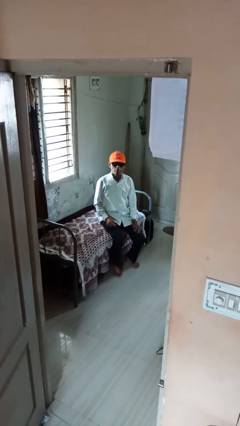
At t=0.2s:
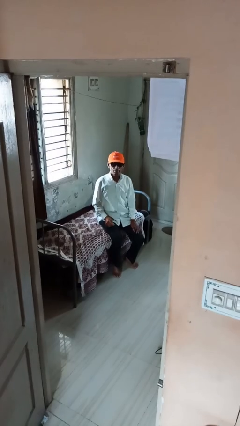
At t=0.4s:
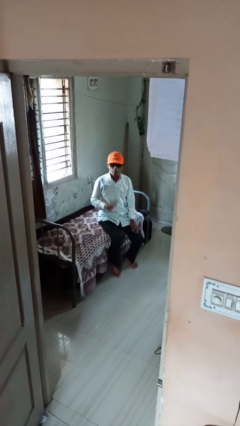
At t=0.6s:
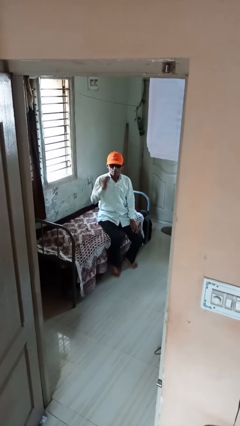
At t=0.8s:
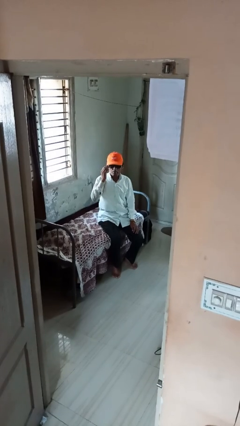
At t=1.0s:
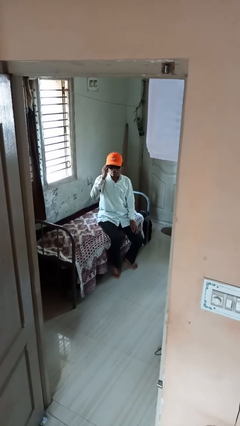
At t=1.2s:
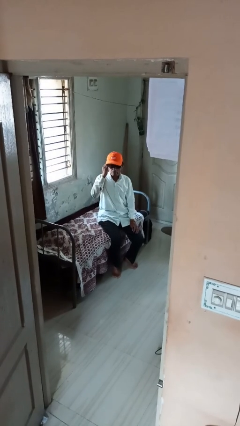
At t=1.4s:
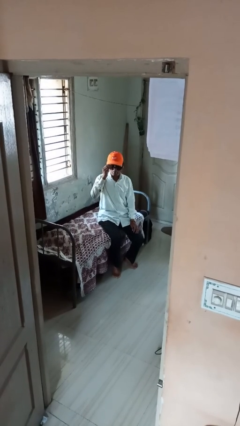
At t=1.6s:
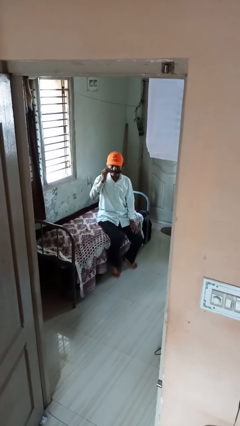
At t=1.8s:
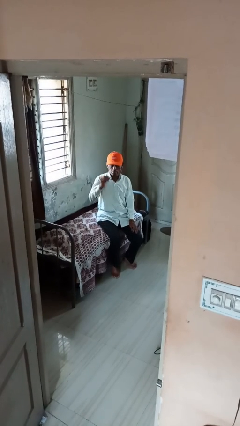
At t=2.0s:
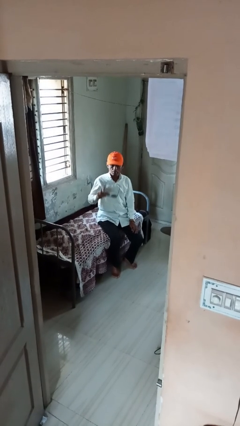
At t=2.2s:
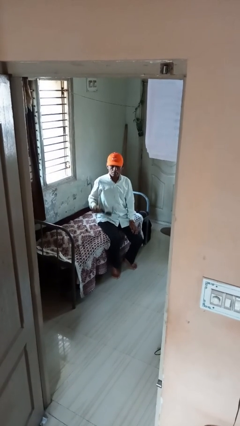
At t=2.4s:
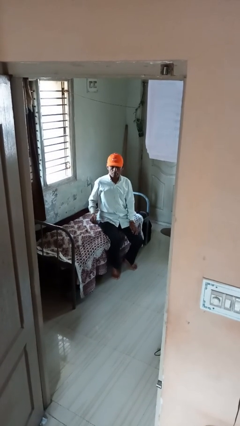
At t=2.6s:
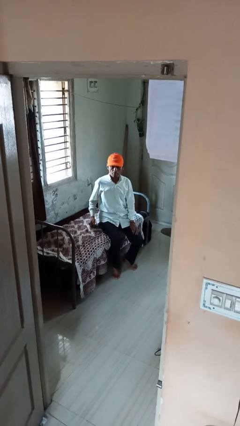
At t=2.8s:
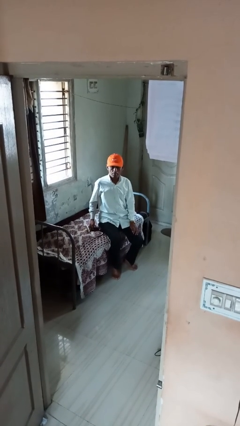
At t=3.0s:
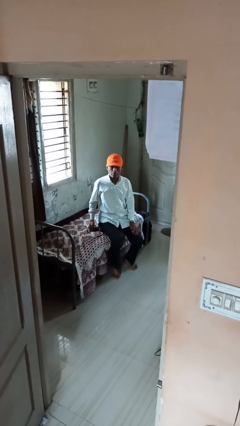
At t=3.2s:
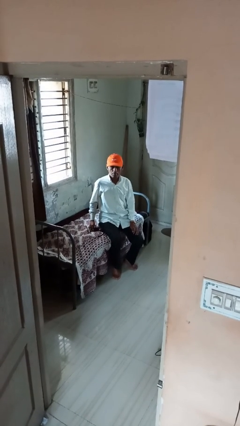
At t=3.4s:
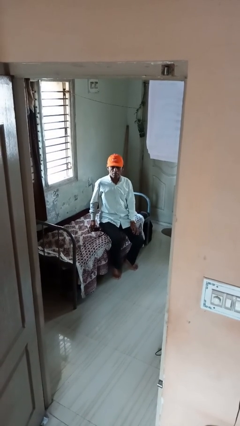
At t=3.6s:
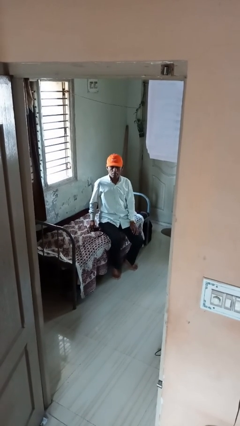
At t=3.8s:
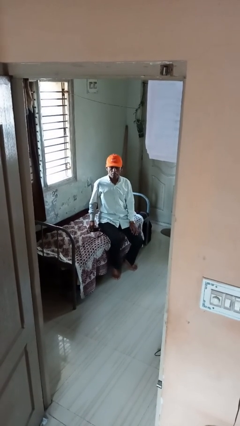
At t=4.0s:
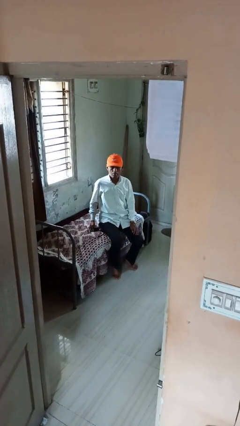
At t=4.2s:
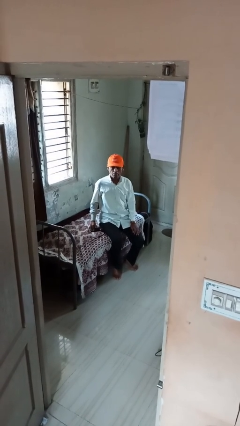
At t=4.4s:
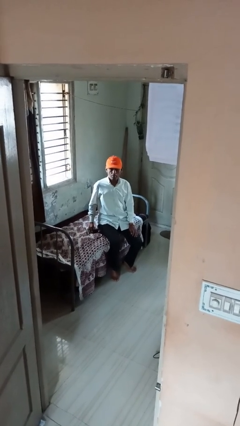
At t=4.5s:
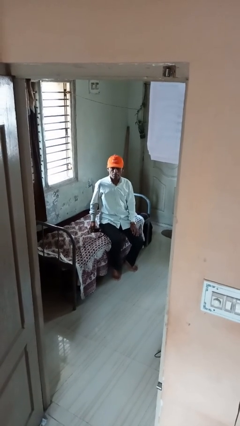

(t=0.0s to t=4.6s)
person takes off sunglasses

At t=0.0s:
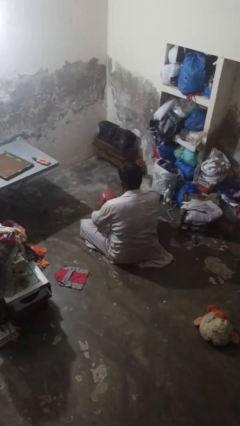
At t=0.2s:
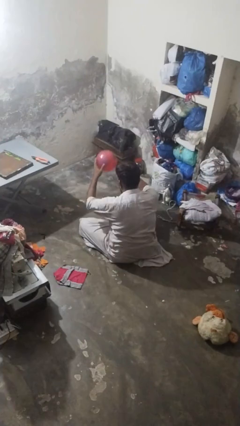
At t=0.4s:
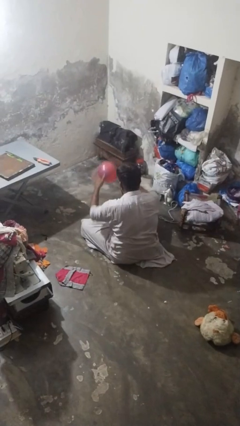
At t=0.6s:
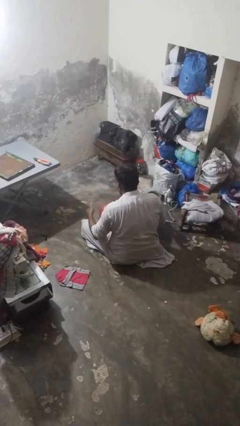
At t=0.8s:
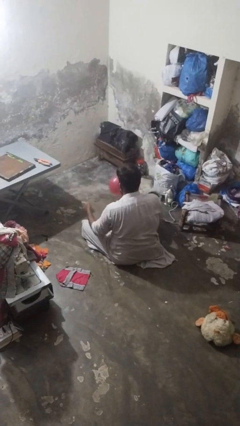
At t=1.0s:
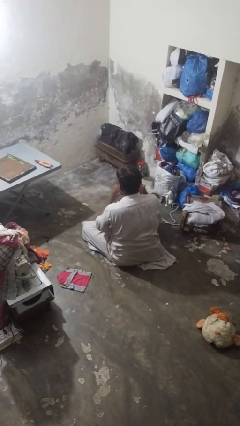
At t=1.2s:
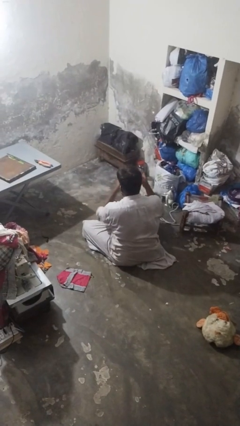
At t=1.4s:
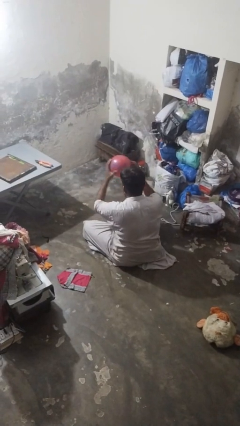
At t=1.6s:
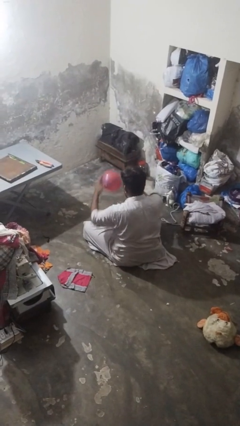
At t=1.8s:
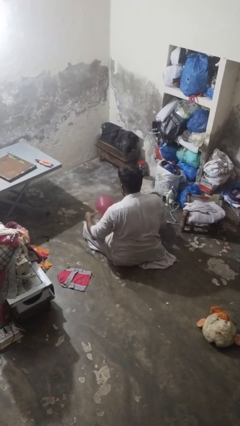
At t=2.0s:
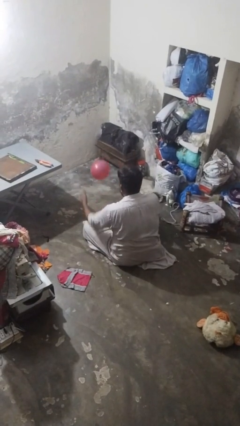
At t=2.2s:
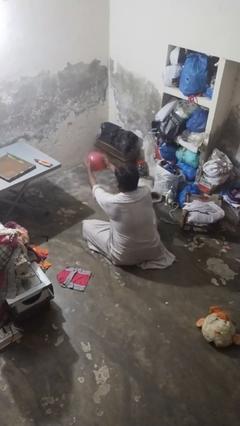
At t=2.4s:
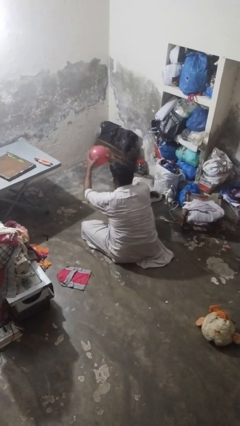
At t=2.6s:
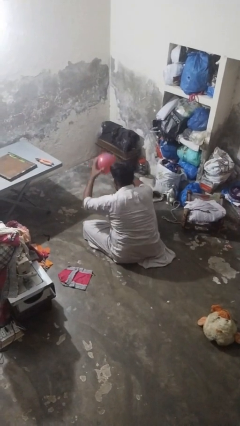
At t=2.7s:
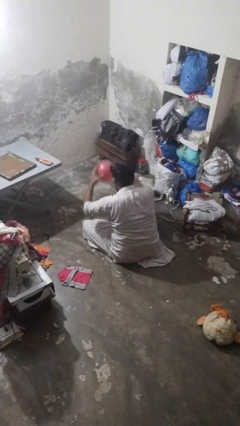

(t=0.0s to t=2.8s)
person bounces ball on floor

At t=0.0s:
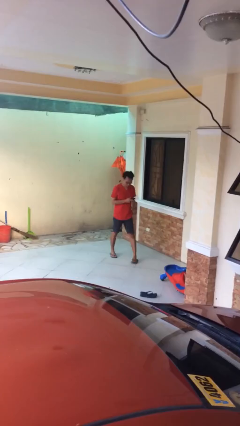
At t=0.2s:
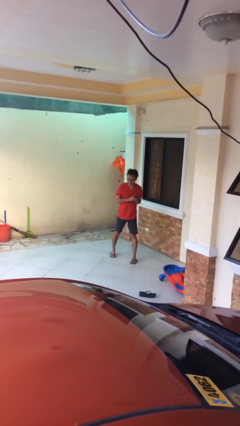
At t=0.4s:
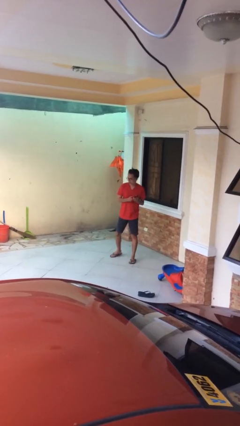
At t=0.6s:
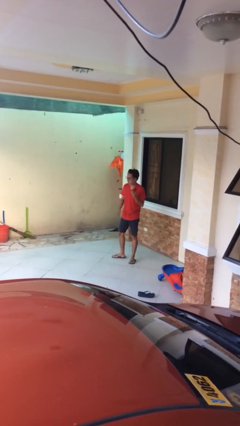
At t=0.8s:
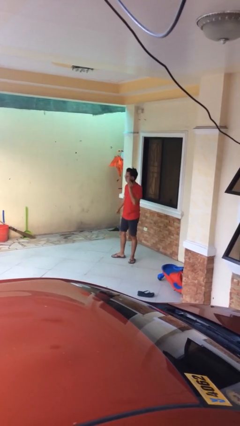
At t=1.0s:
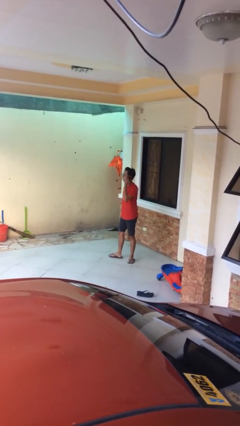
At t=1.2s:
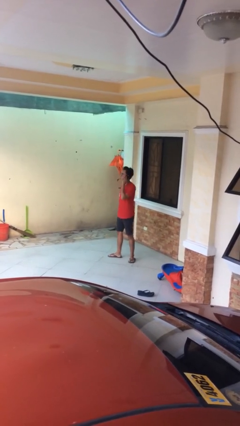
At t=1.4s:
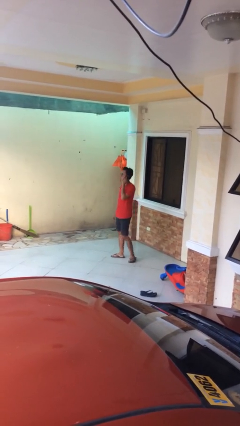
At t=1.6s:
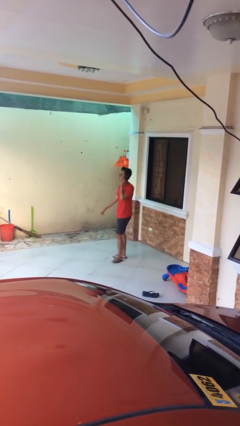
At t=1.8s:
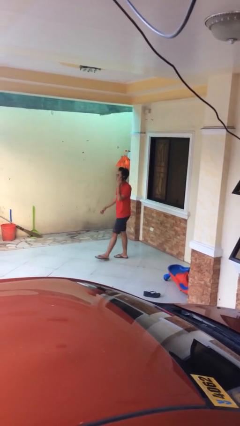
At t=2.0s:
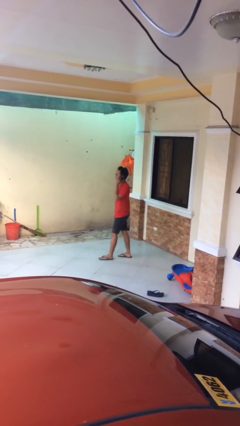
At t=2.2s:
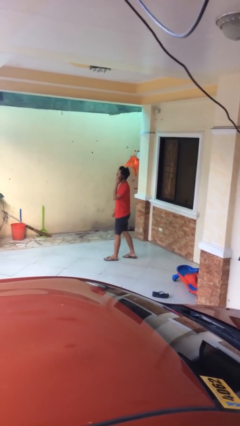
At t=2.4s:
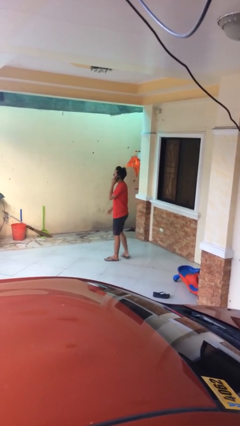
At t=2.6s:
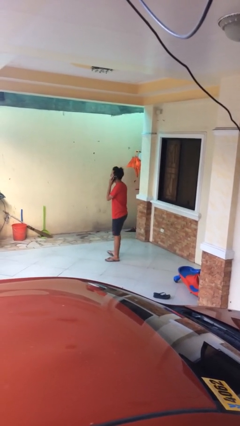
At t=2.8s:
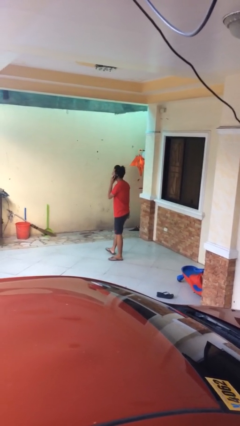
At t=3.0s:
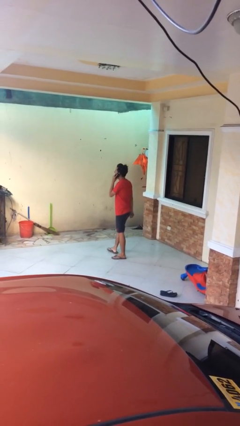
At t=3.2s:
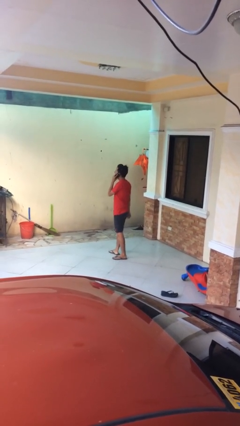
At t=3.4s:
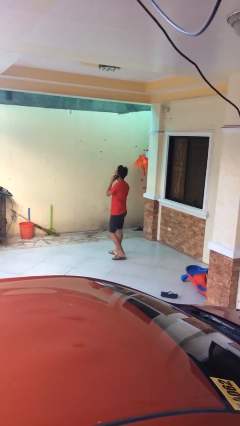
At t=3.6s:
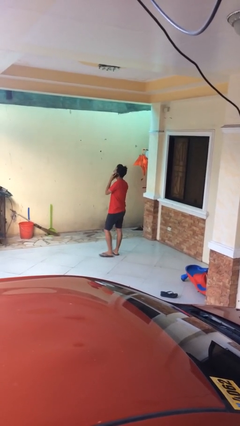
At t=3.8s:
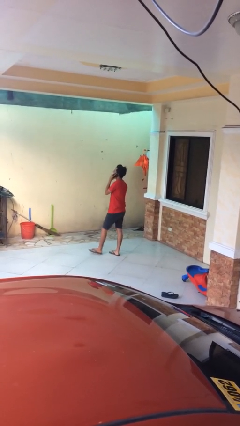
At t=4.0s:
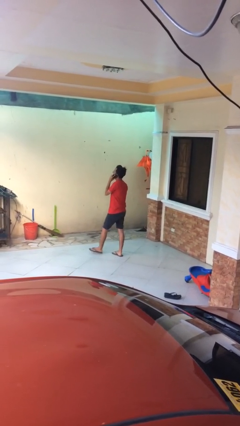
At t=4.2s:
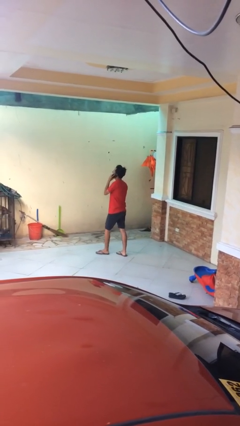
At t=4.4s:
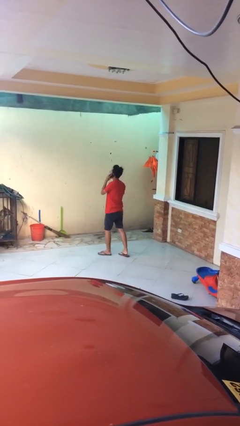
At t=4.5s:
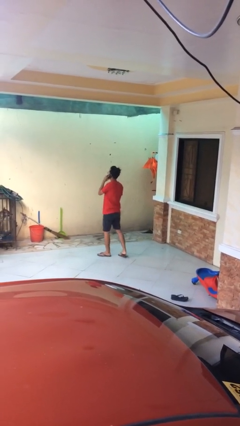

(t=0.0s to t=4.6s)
person talks on phone

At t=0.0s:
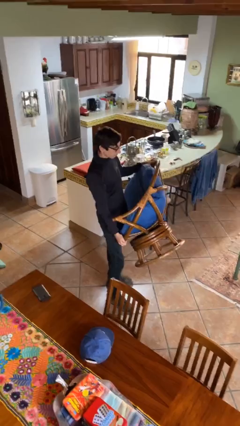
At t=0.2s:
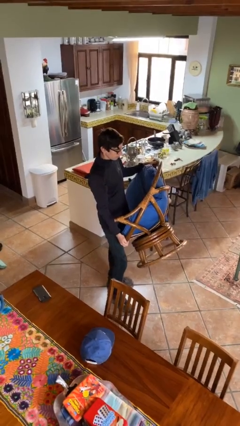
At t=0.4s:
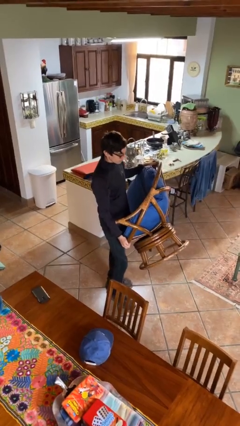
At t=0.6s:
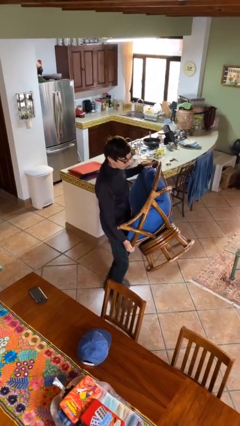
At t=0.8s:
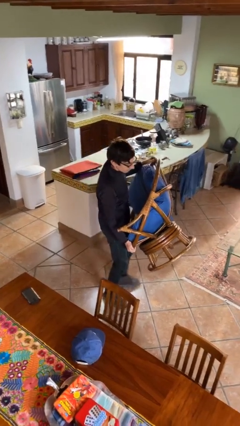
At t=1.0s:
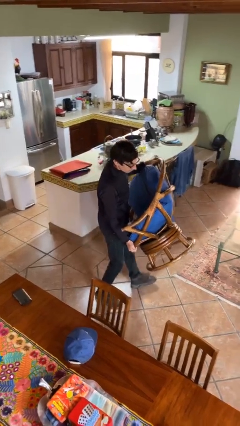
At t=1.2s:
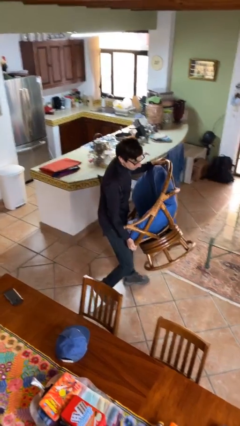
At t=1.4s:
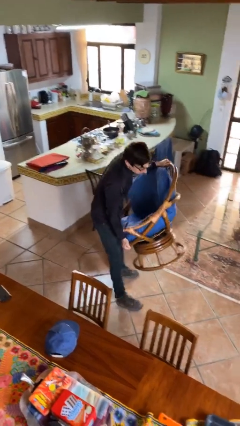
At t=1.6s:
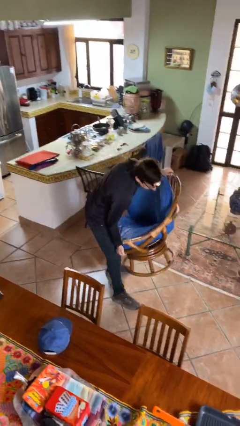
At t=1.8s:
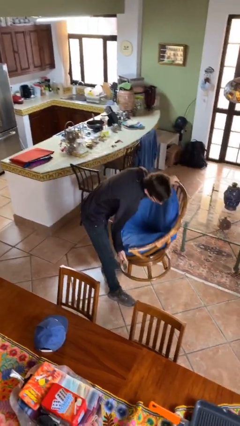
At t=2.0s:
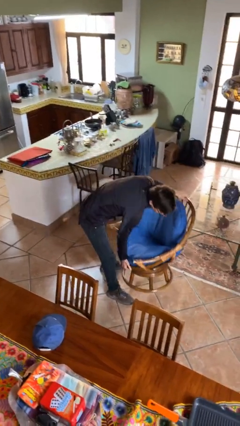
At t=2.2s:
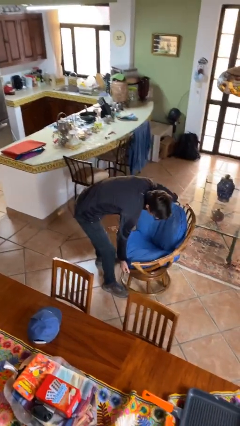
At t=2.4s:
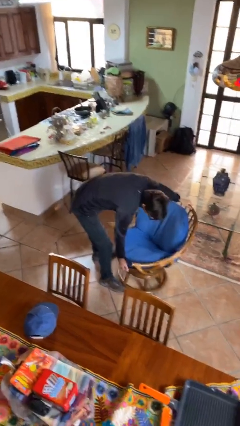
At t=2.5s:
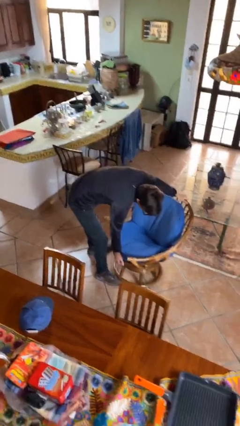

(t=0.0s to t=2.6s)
person carries heavy object

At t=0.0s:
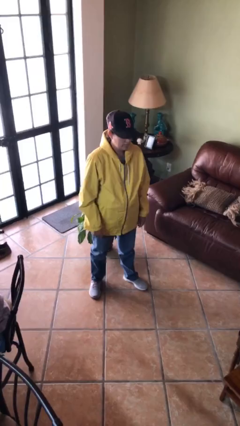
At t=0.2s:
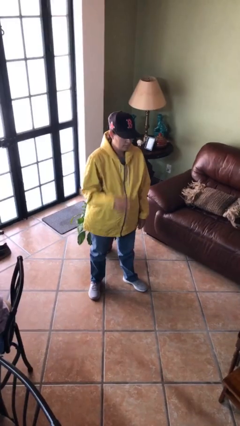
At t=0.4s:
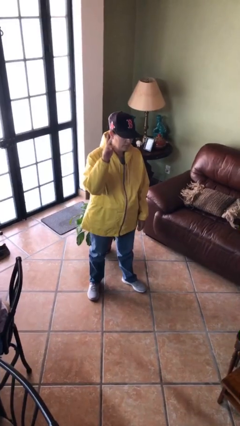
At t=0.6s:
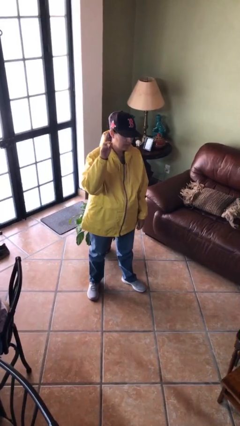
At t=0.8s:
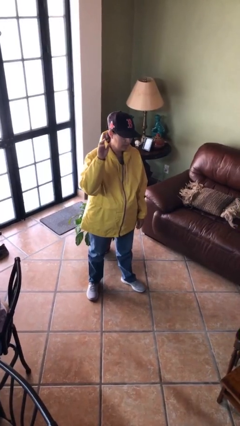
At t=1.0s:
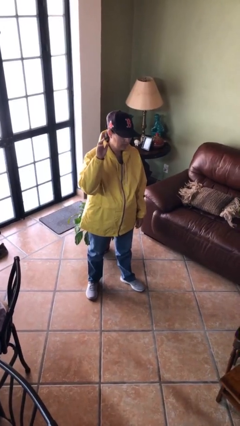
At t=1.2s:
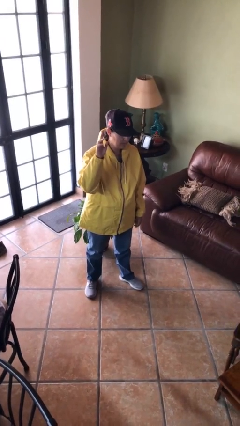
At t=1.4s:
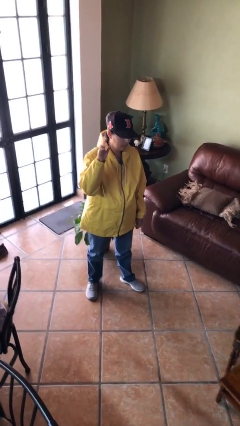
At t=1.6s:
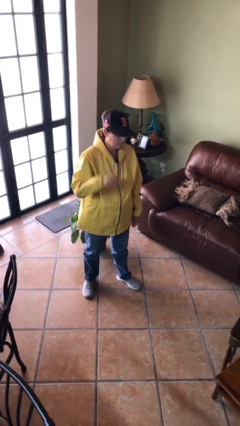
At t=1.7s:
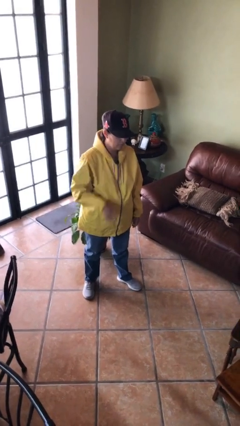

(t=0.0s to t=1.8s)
person gestures raise hand

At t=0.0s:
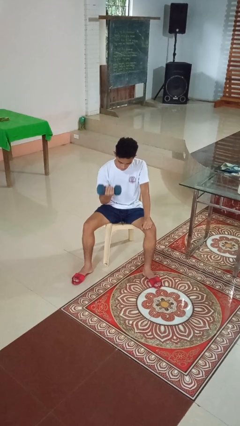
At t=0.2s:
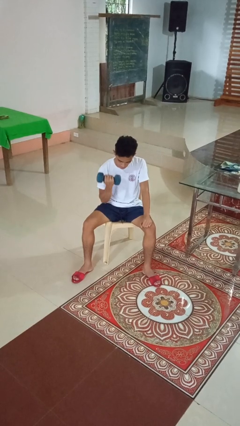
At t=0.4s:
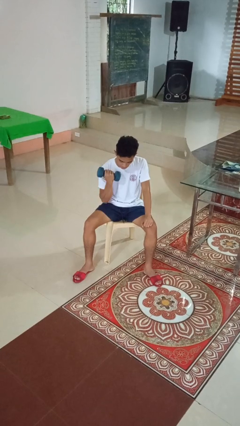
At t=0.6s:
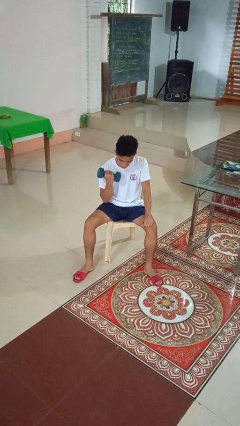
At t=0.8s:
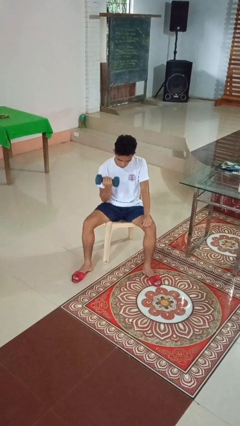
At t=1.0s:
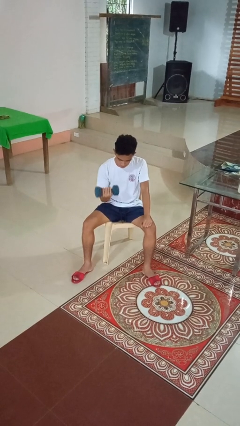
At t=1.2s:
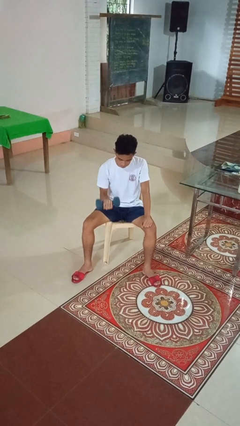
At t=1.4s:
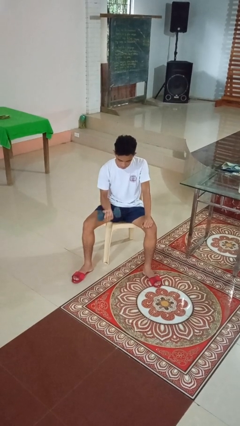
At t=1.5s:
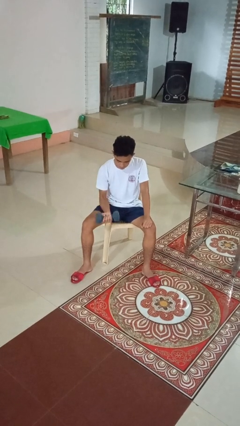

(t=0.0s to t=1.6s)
person lifts dumbbells
